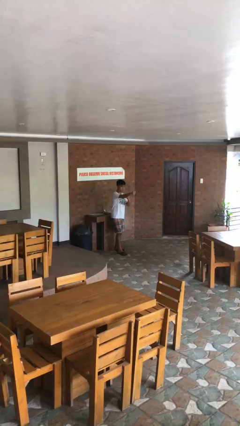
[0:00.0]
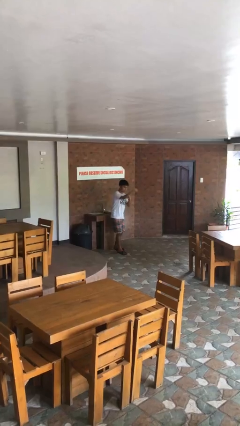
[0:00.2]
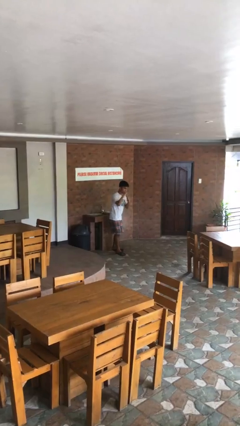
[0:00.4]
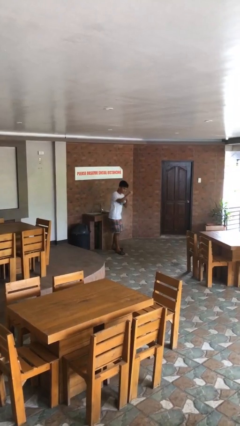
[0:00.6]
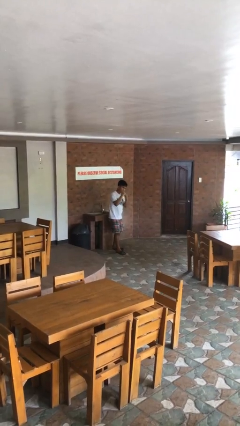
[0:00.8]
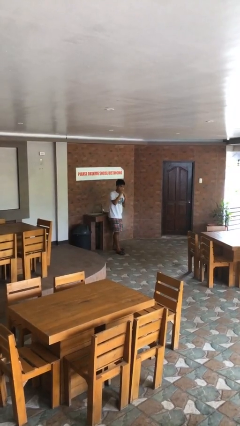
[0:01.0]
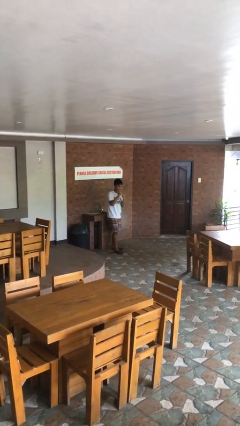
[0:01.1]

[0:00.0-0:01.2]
person punches

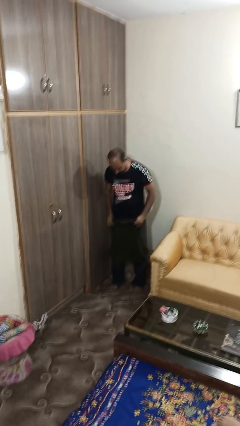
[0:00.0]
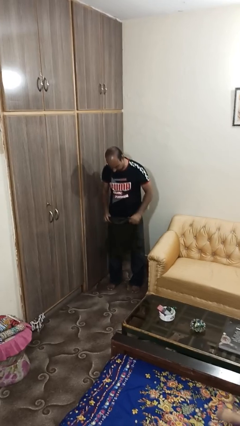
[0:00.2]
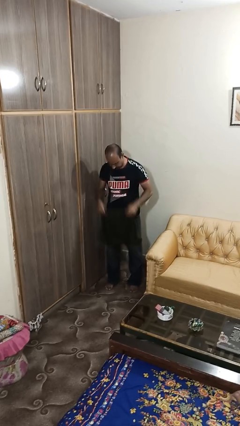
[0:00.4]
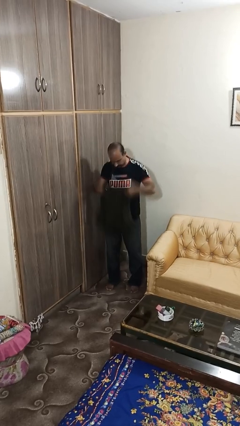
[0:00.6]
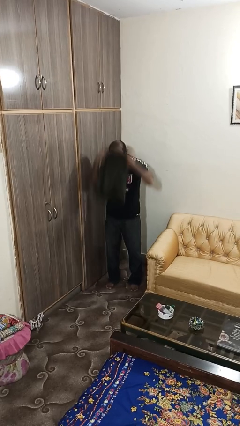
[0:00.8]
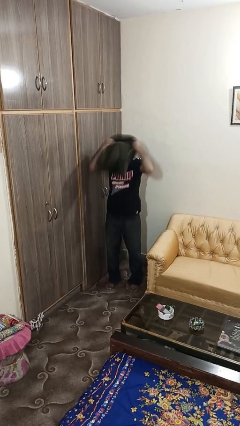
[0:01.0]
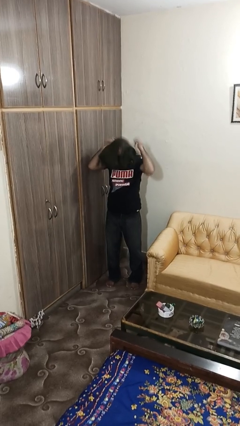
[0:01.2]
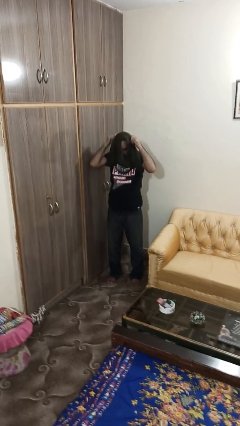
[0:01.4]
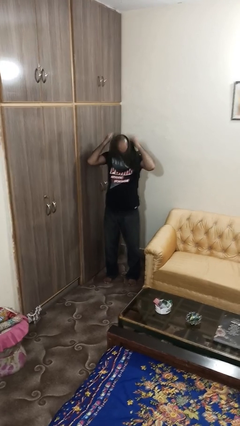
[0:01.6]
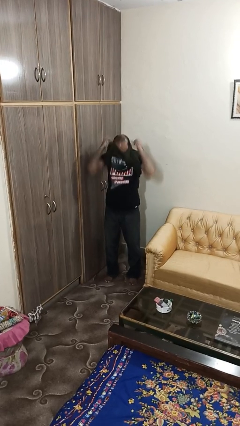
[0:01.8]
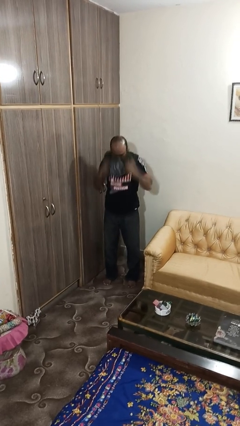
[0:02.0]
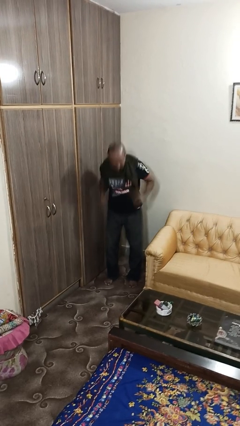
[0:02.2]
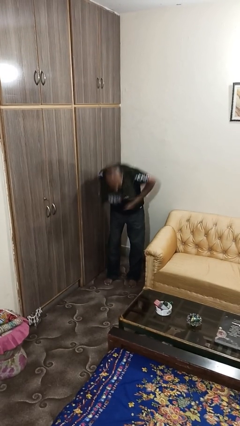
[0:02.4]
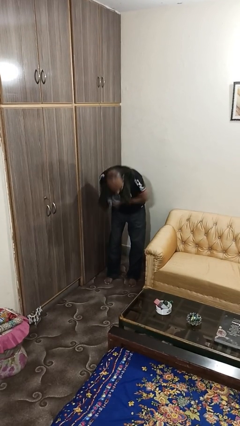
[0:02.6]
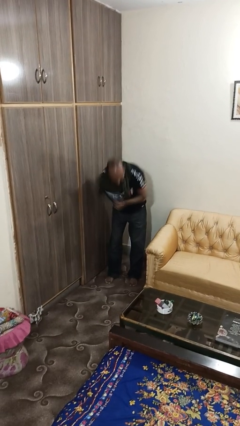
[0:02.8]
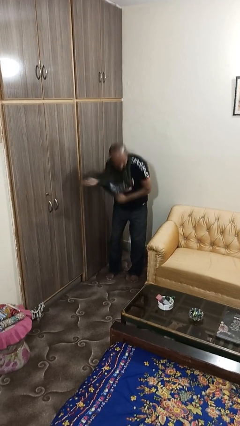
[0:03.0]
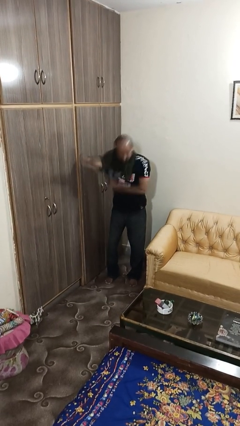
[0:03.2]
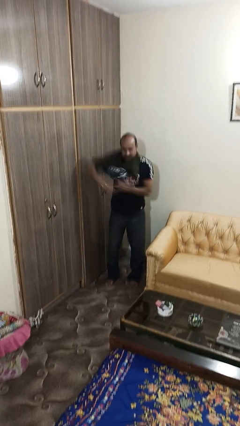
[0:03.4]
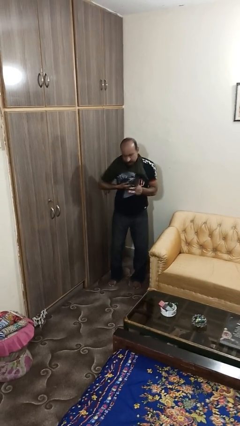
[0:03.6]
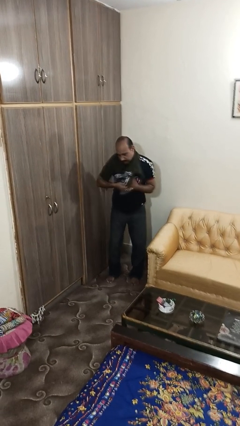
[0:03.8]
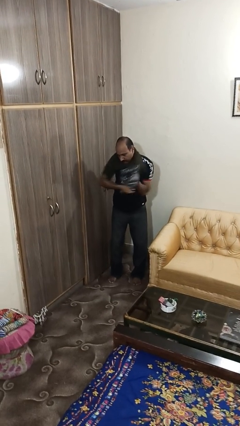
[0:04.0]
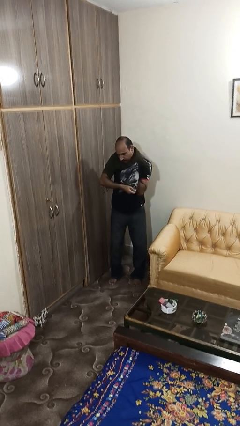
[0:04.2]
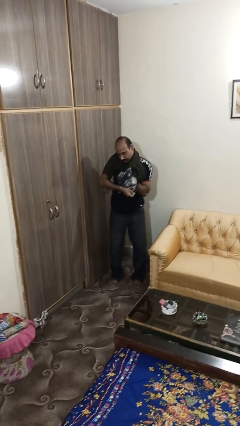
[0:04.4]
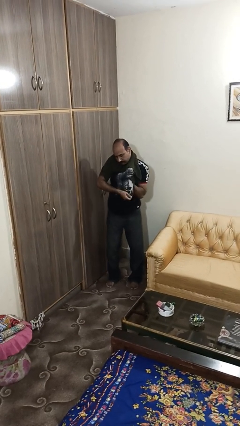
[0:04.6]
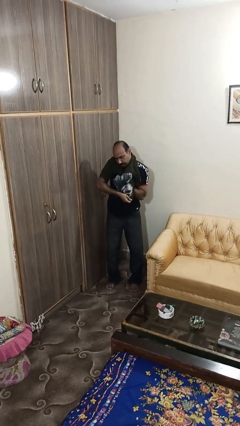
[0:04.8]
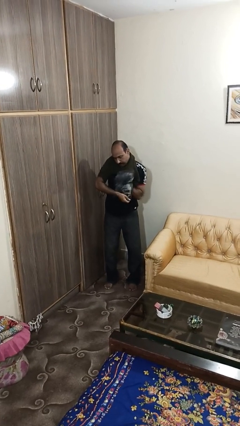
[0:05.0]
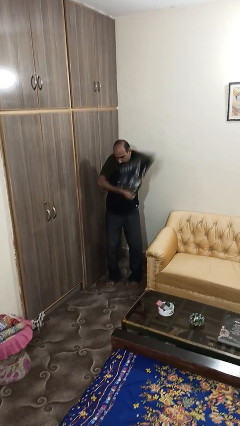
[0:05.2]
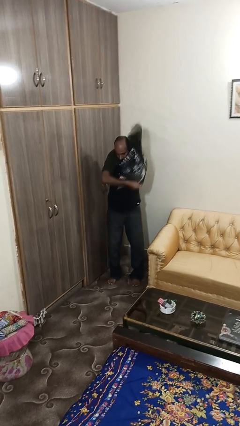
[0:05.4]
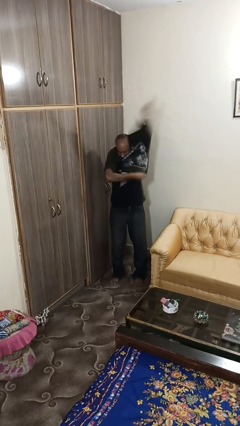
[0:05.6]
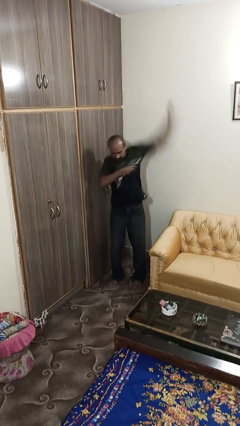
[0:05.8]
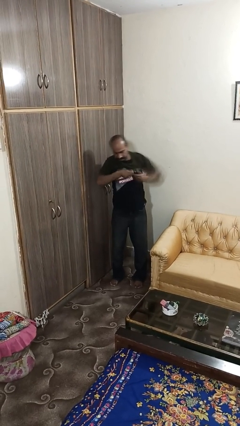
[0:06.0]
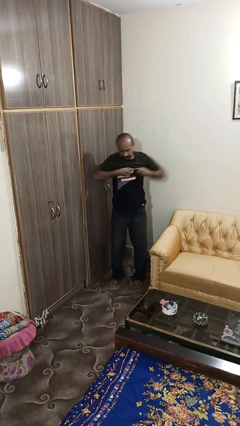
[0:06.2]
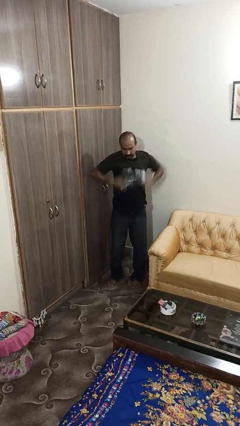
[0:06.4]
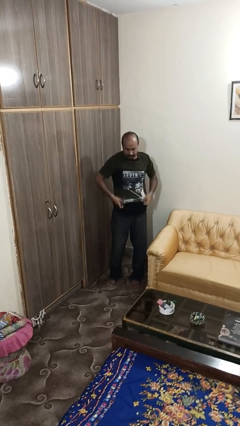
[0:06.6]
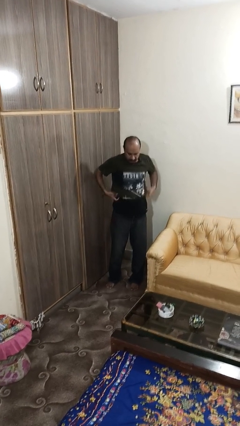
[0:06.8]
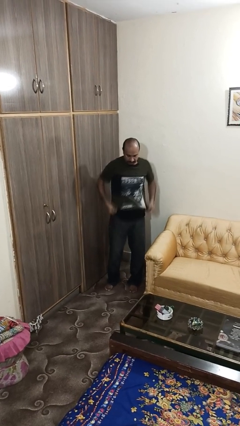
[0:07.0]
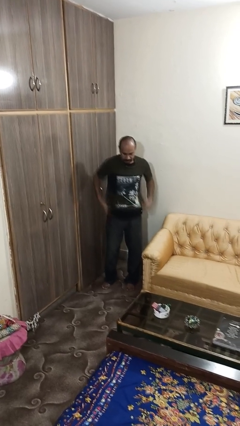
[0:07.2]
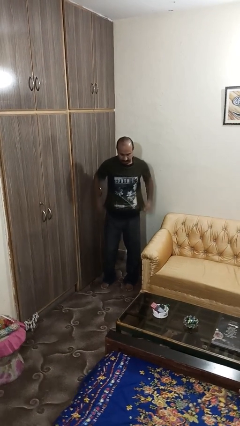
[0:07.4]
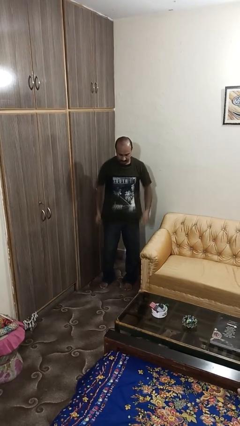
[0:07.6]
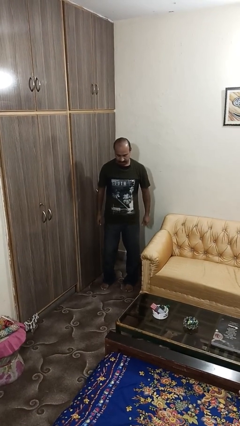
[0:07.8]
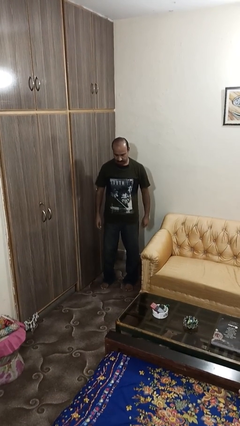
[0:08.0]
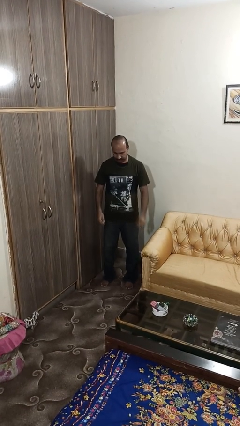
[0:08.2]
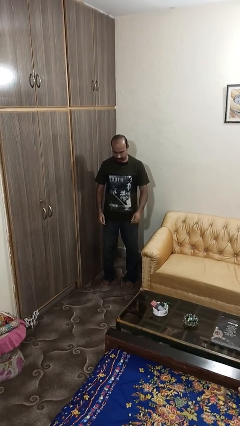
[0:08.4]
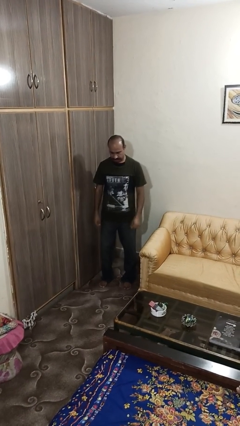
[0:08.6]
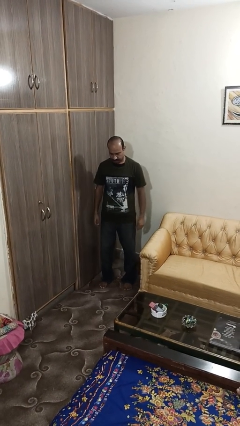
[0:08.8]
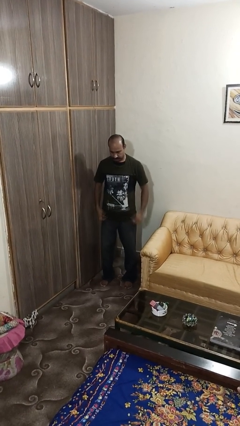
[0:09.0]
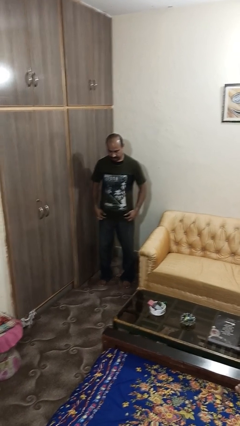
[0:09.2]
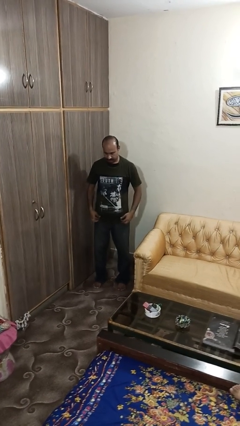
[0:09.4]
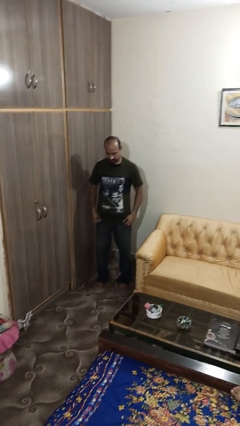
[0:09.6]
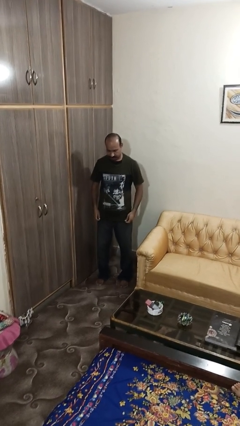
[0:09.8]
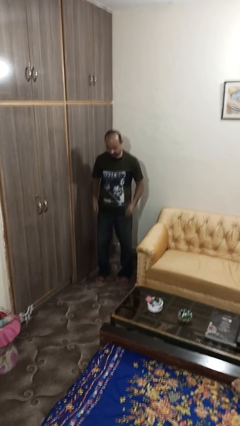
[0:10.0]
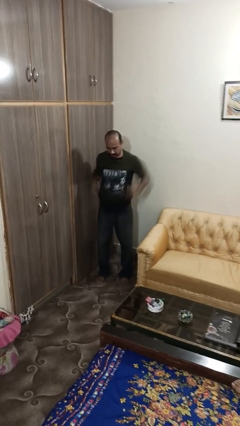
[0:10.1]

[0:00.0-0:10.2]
person puts on shirt

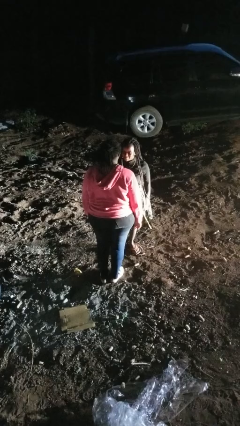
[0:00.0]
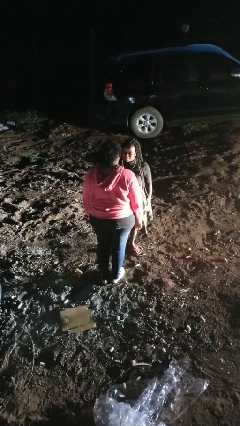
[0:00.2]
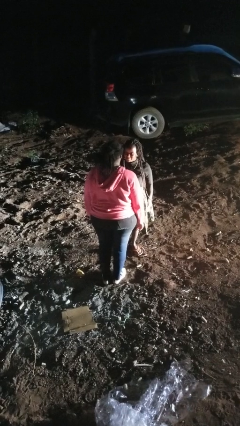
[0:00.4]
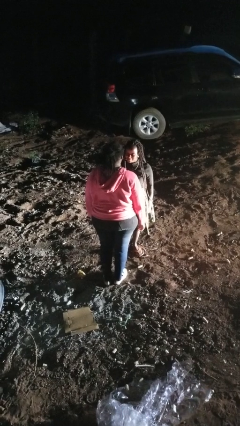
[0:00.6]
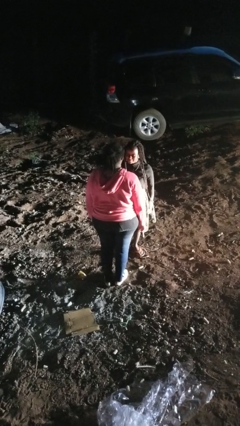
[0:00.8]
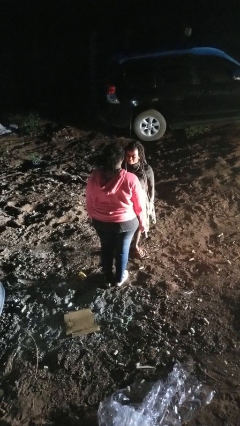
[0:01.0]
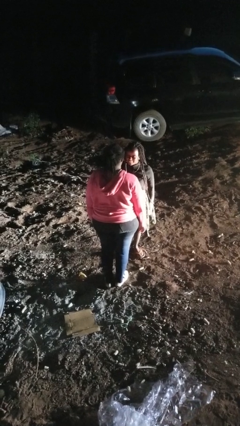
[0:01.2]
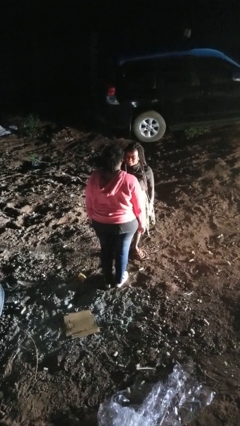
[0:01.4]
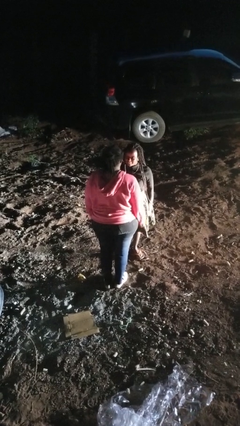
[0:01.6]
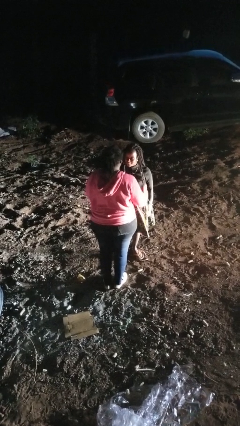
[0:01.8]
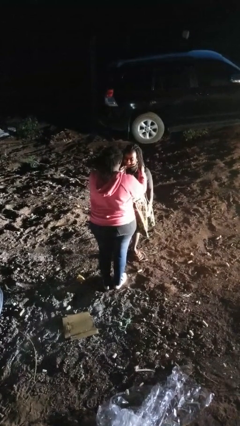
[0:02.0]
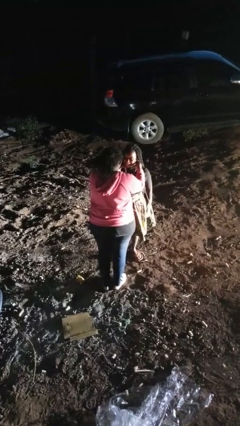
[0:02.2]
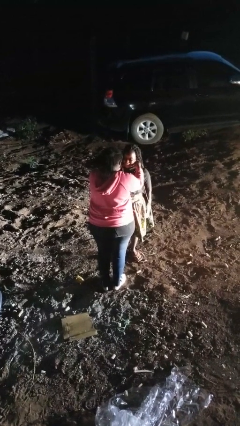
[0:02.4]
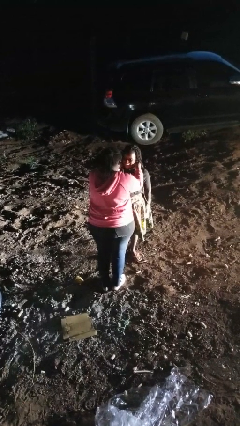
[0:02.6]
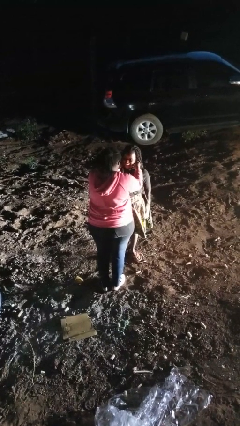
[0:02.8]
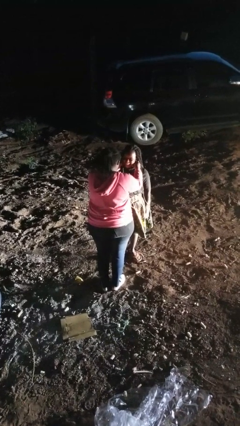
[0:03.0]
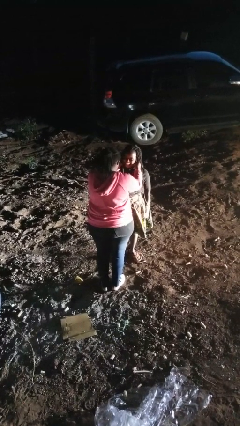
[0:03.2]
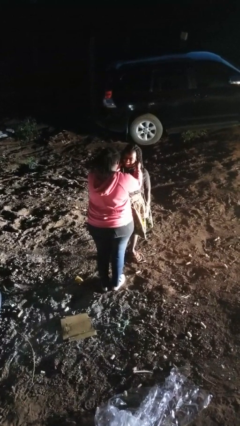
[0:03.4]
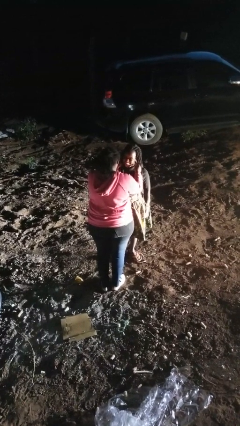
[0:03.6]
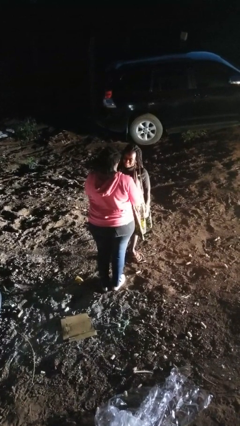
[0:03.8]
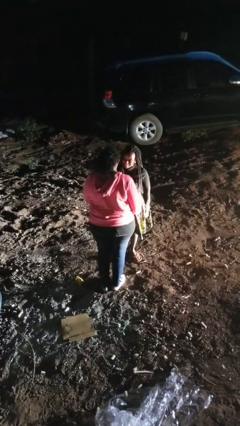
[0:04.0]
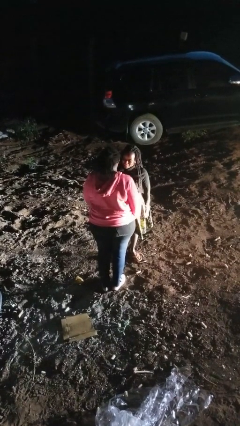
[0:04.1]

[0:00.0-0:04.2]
person tickles person

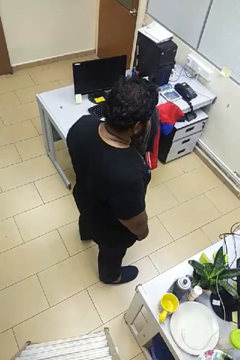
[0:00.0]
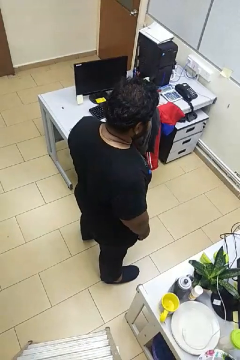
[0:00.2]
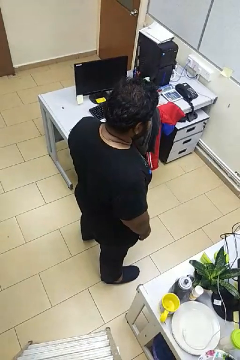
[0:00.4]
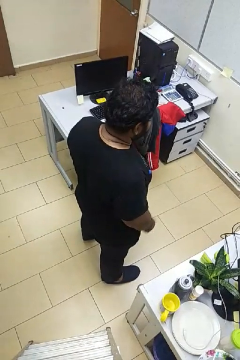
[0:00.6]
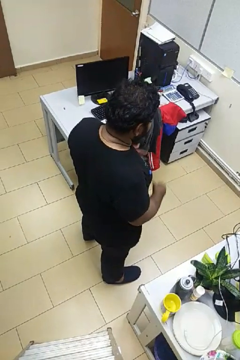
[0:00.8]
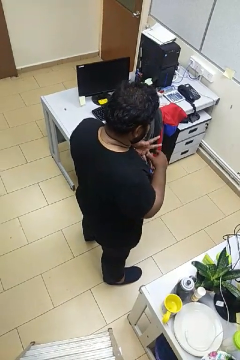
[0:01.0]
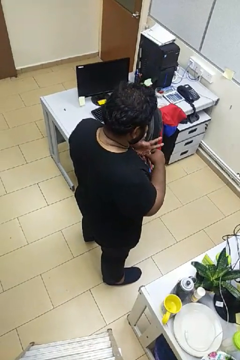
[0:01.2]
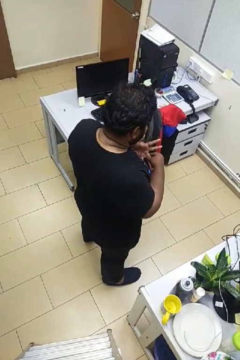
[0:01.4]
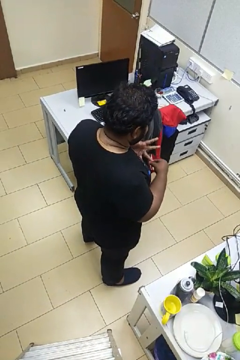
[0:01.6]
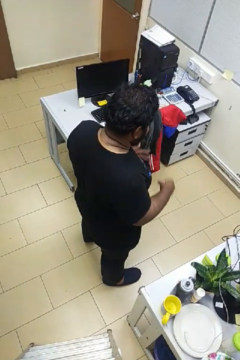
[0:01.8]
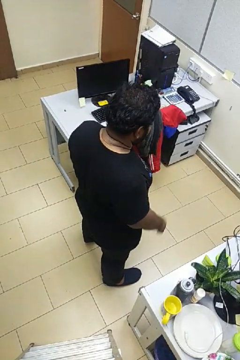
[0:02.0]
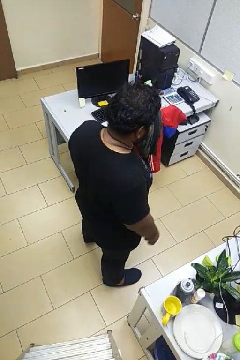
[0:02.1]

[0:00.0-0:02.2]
person takes off ring
